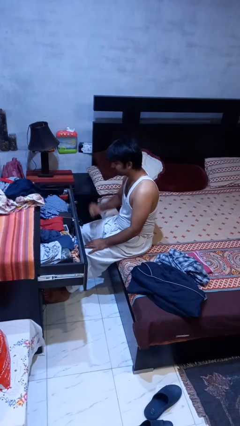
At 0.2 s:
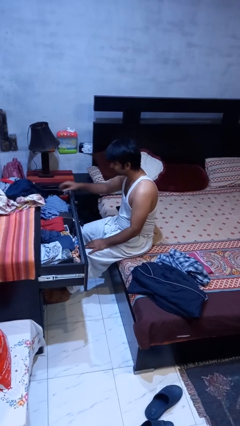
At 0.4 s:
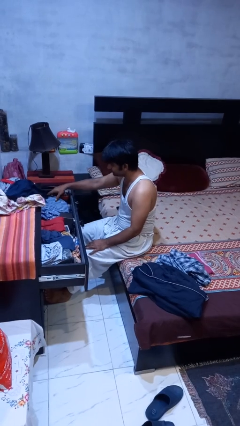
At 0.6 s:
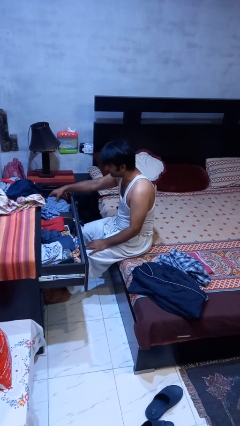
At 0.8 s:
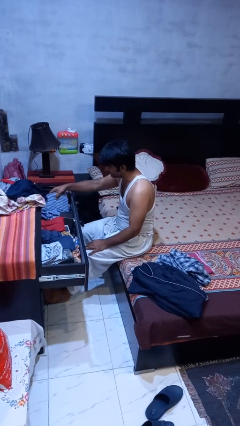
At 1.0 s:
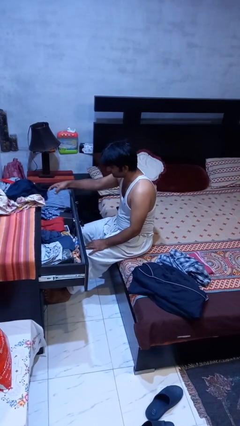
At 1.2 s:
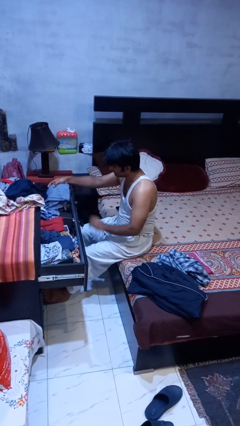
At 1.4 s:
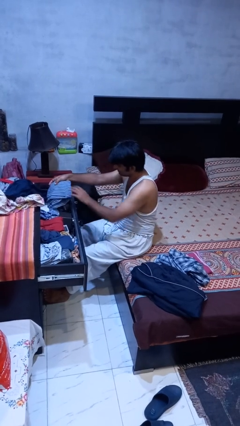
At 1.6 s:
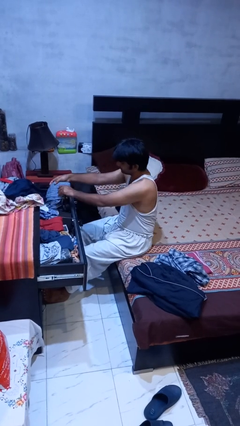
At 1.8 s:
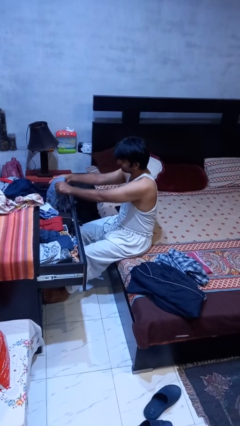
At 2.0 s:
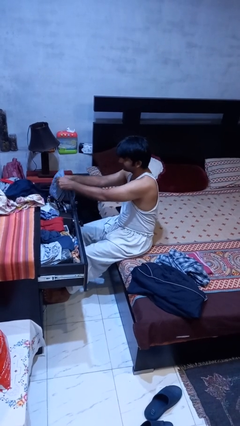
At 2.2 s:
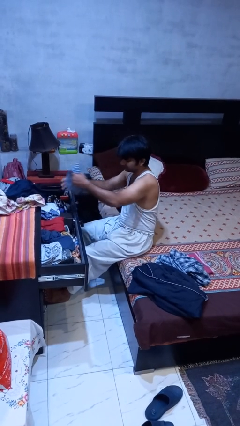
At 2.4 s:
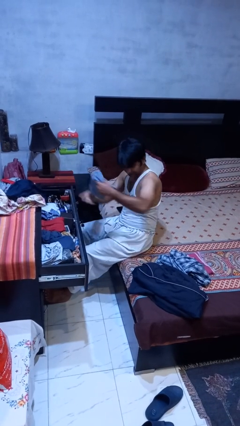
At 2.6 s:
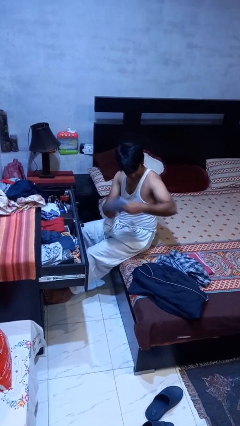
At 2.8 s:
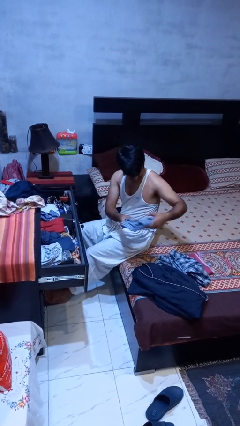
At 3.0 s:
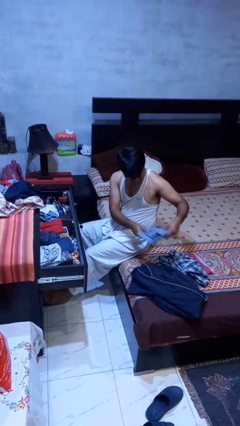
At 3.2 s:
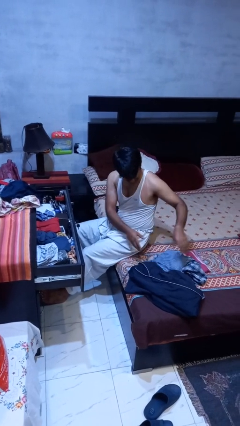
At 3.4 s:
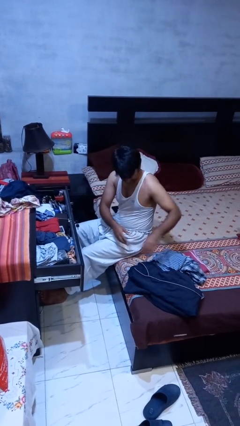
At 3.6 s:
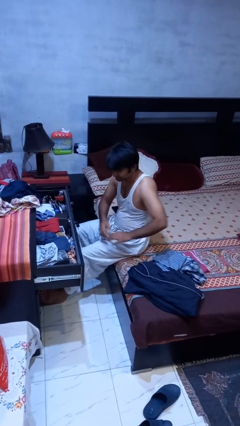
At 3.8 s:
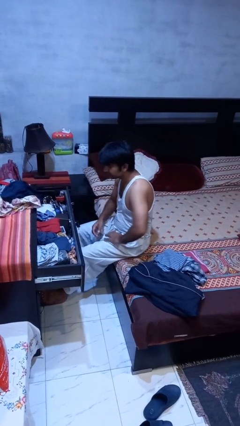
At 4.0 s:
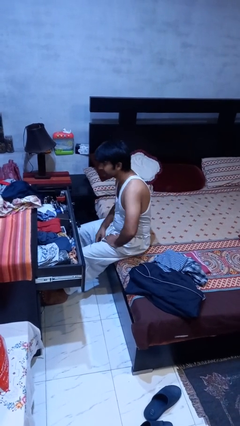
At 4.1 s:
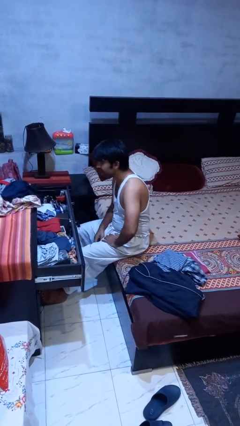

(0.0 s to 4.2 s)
person takes clothes from dresser

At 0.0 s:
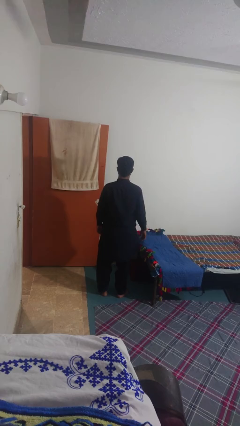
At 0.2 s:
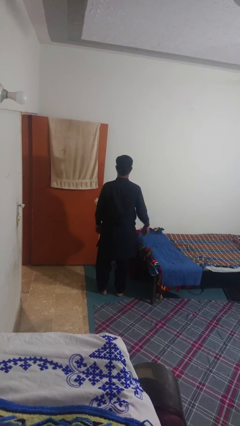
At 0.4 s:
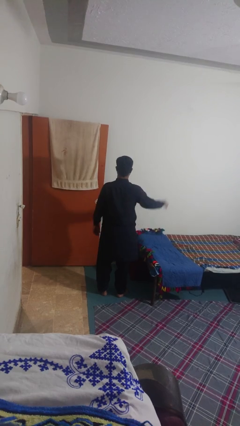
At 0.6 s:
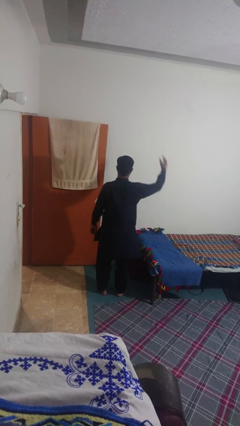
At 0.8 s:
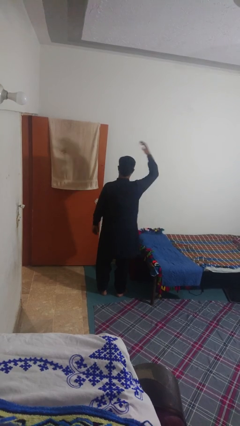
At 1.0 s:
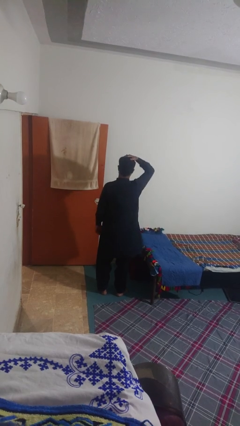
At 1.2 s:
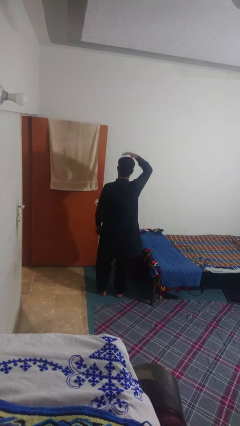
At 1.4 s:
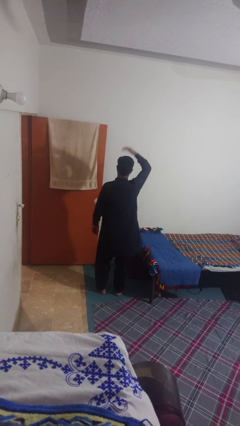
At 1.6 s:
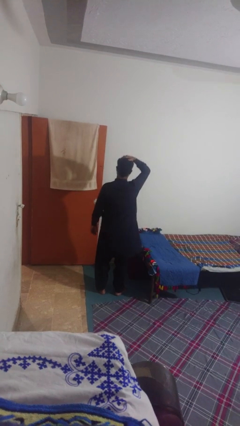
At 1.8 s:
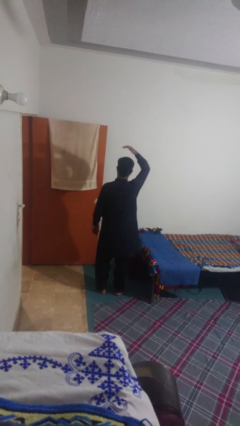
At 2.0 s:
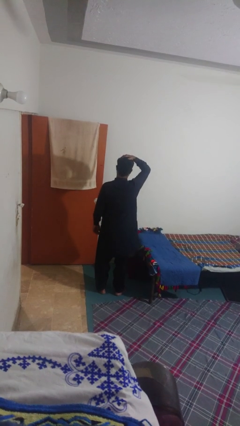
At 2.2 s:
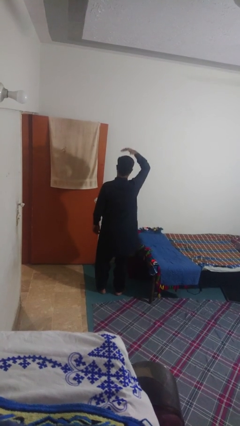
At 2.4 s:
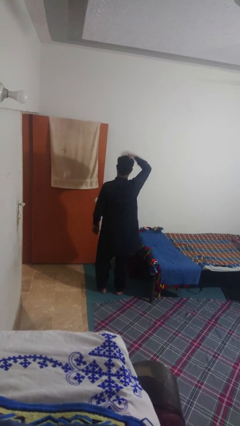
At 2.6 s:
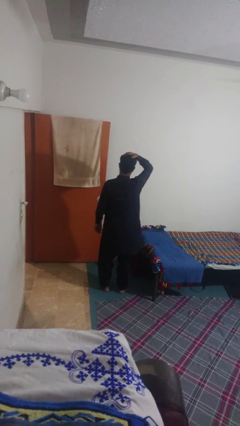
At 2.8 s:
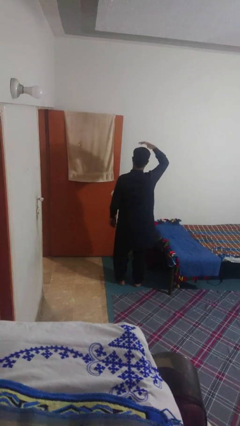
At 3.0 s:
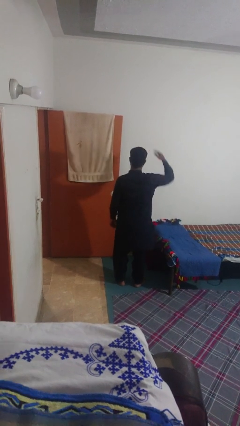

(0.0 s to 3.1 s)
person pats head

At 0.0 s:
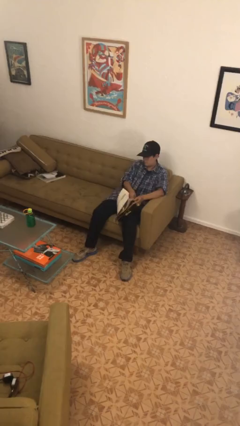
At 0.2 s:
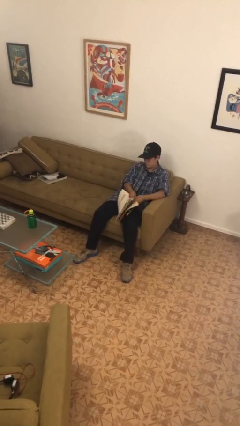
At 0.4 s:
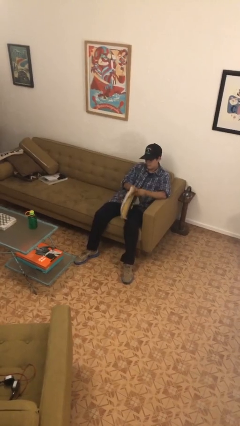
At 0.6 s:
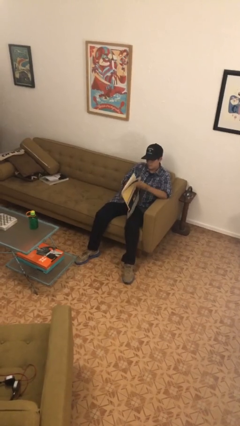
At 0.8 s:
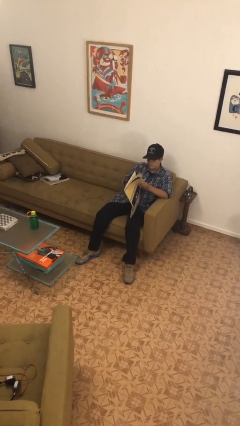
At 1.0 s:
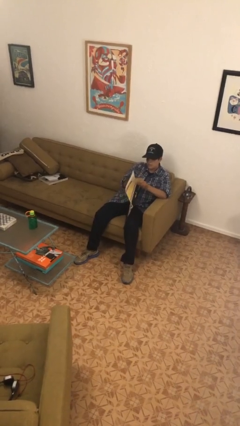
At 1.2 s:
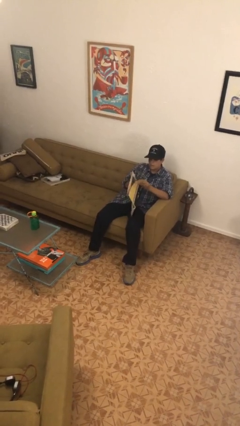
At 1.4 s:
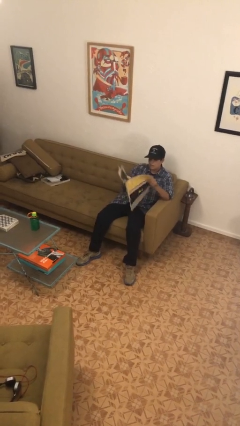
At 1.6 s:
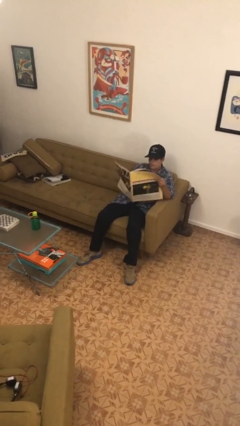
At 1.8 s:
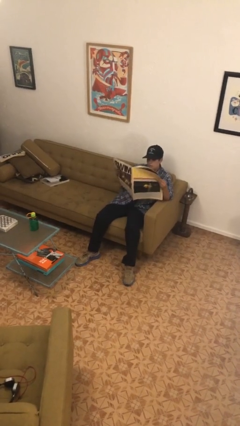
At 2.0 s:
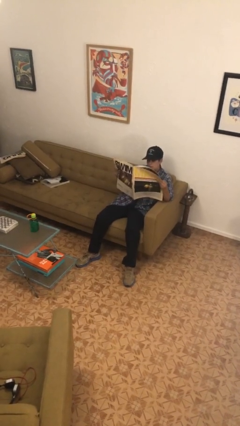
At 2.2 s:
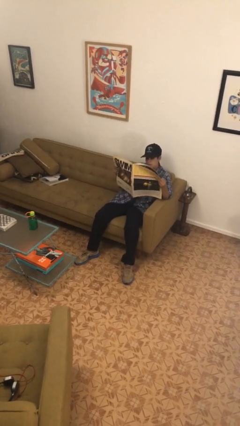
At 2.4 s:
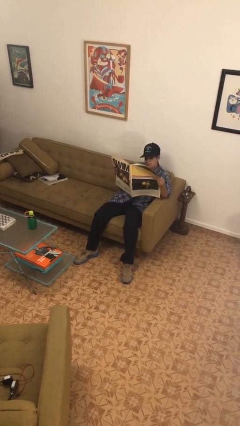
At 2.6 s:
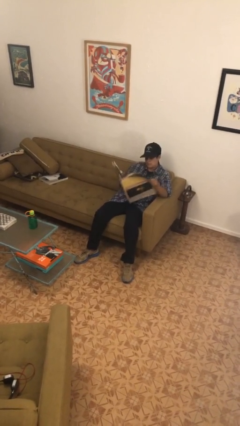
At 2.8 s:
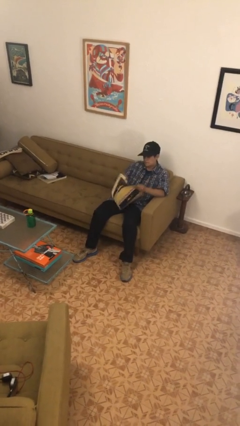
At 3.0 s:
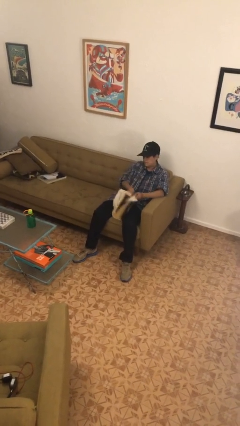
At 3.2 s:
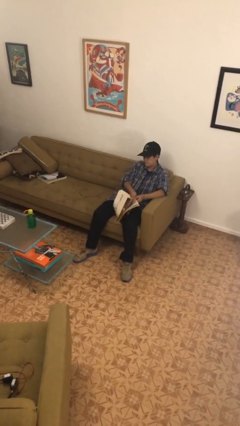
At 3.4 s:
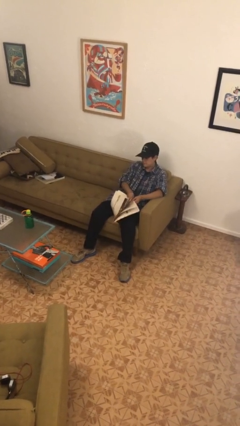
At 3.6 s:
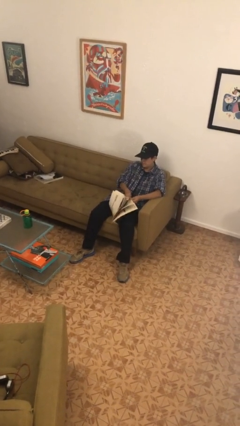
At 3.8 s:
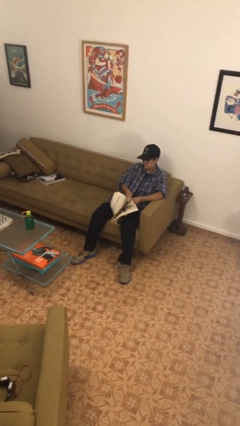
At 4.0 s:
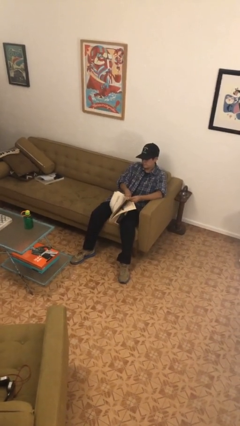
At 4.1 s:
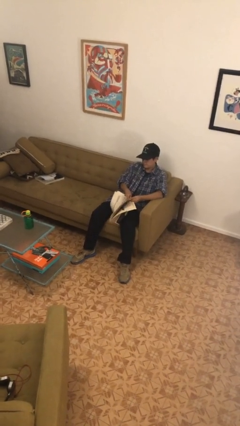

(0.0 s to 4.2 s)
person reads newspaper

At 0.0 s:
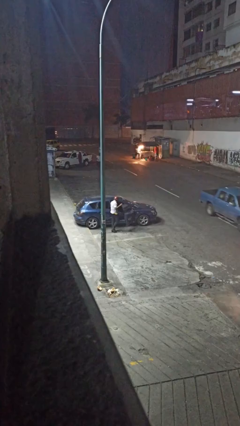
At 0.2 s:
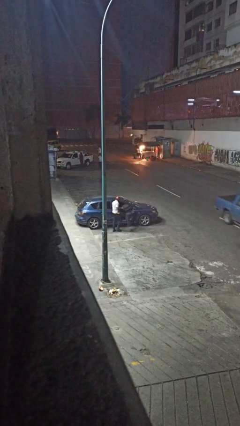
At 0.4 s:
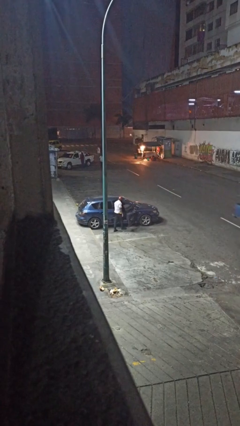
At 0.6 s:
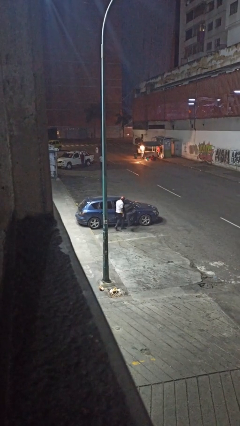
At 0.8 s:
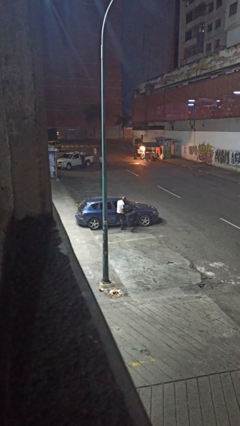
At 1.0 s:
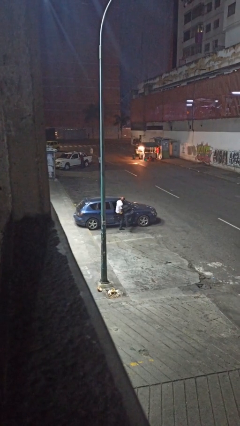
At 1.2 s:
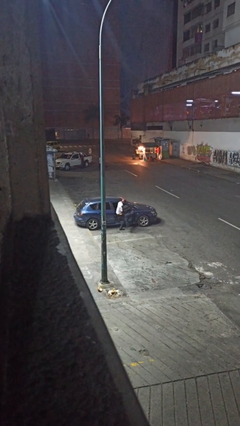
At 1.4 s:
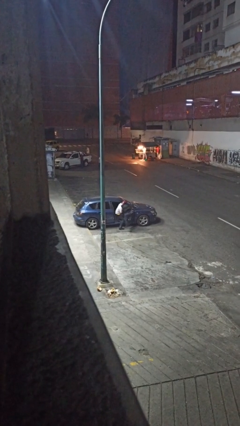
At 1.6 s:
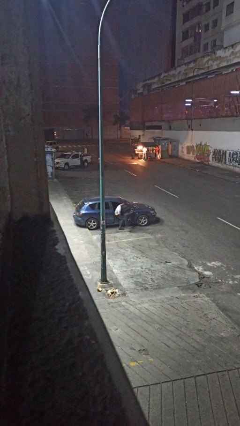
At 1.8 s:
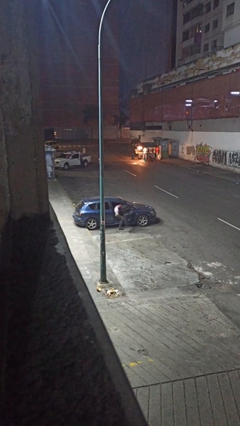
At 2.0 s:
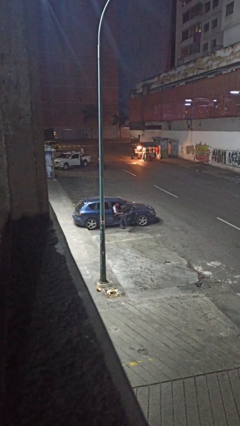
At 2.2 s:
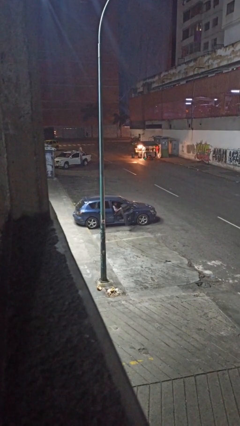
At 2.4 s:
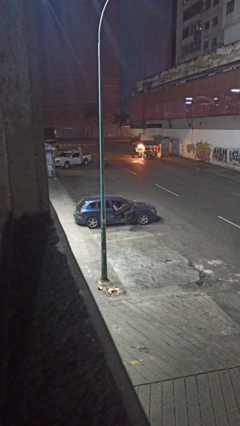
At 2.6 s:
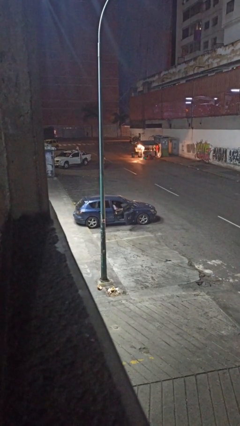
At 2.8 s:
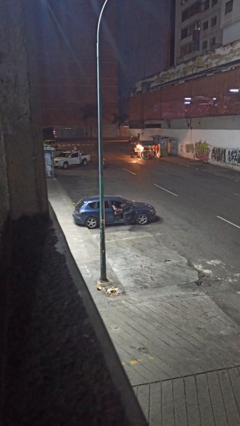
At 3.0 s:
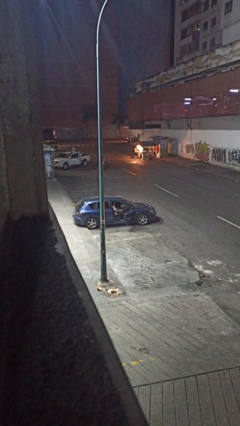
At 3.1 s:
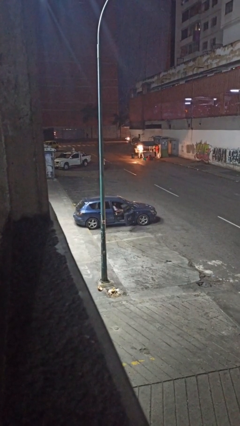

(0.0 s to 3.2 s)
person enters car

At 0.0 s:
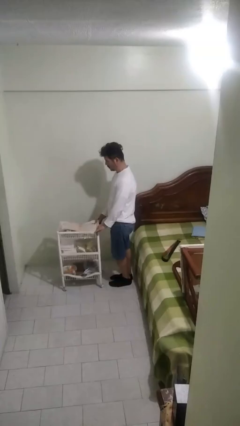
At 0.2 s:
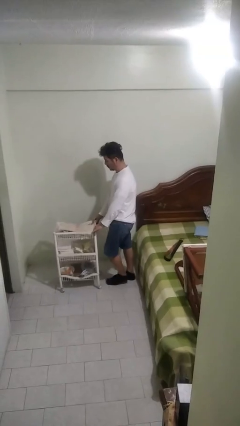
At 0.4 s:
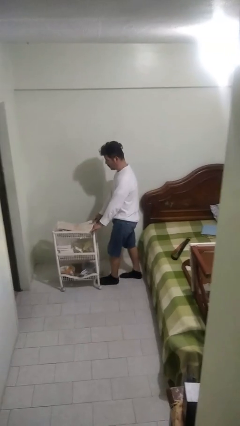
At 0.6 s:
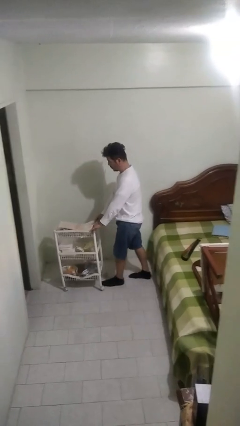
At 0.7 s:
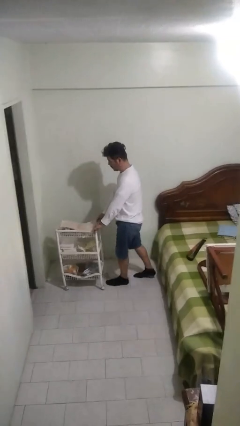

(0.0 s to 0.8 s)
person pushes wheeled cart

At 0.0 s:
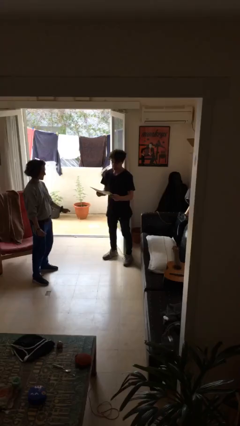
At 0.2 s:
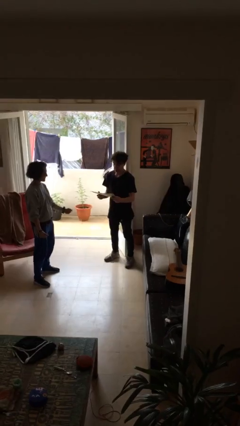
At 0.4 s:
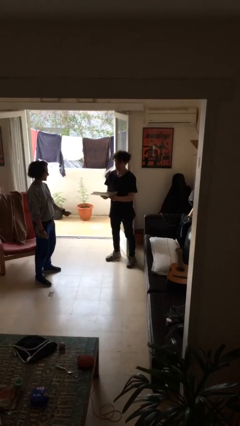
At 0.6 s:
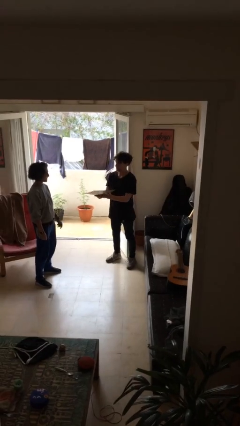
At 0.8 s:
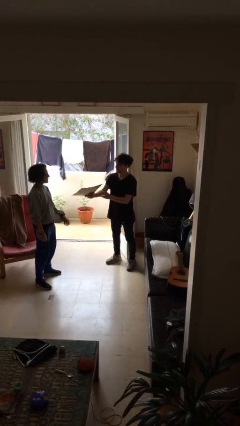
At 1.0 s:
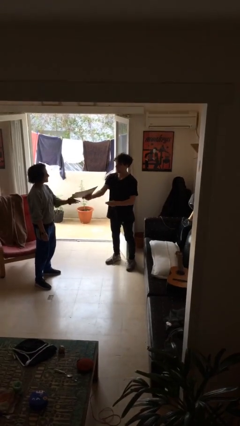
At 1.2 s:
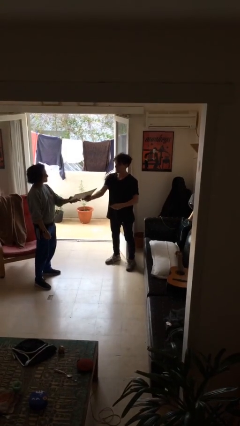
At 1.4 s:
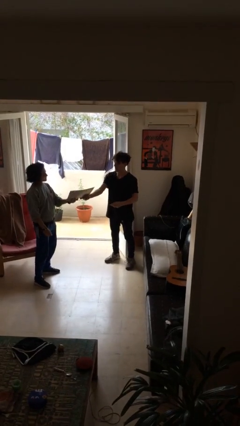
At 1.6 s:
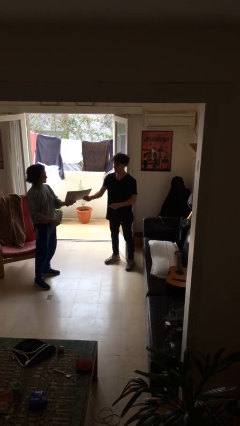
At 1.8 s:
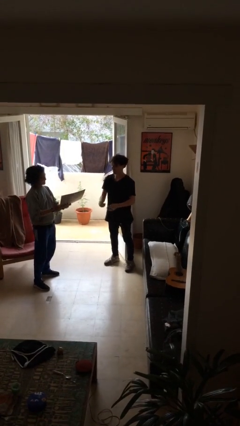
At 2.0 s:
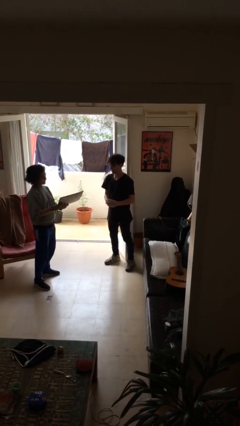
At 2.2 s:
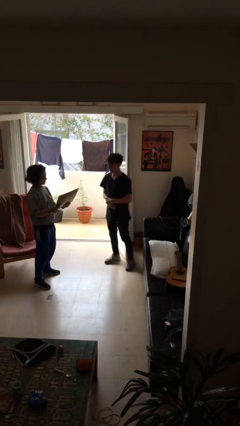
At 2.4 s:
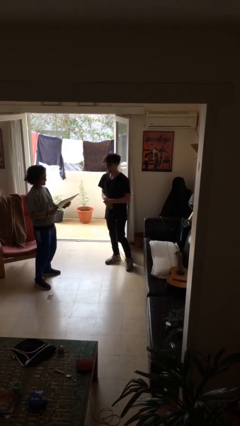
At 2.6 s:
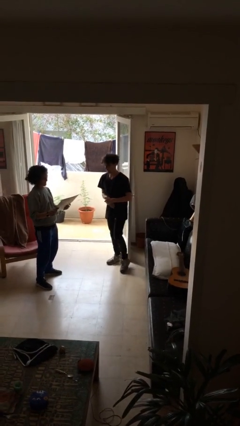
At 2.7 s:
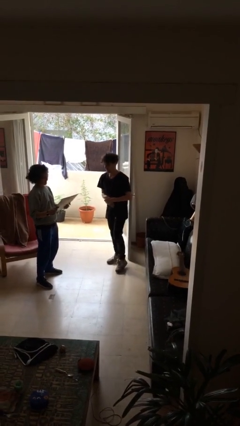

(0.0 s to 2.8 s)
person transfers object to person
